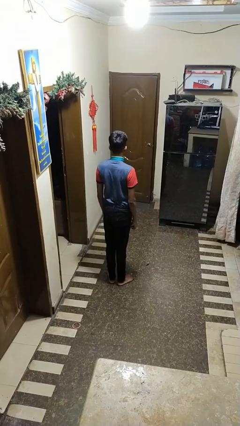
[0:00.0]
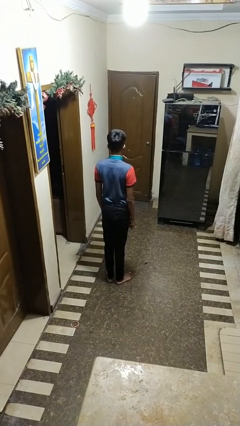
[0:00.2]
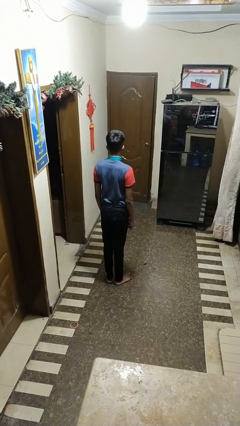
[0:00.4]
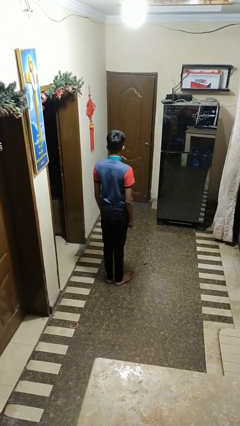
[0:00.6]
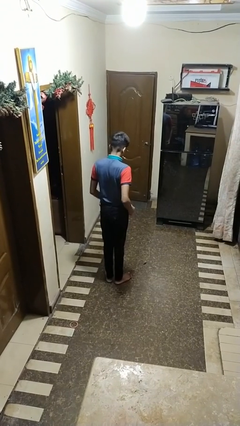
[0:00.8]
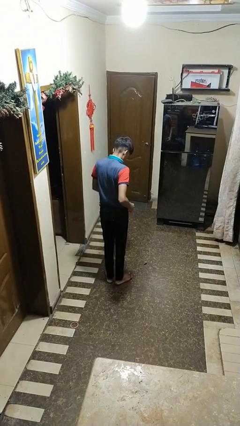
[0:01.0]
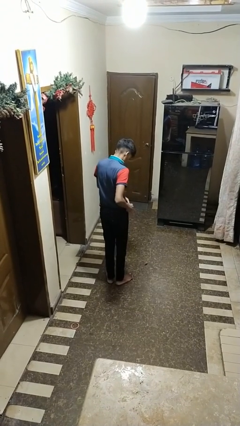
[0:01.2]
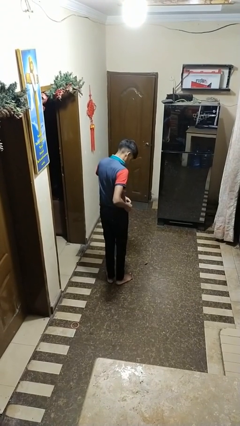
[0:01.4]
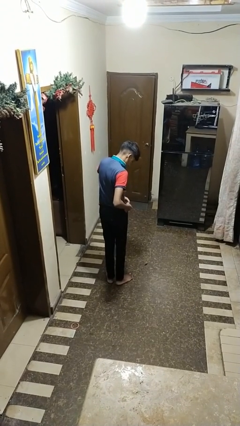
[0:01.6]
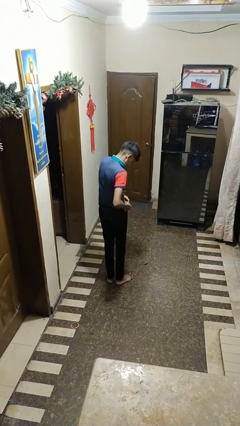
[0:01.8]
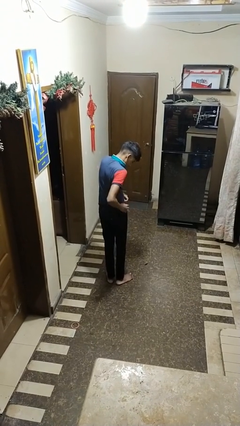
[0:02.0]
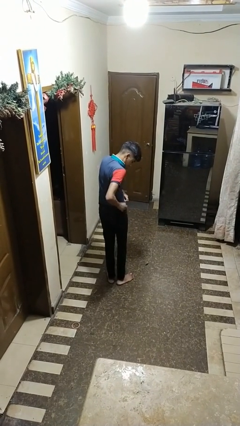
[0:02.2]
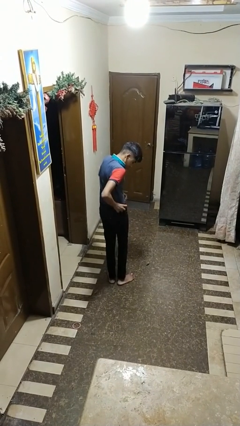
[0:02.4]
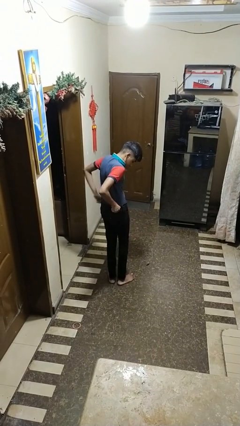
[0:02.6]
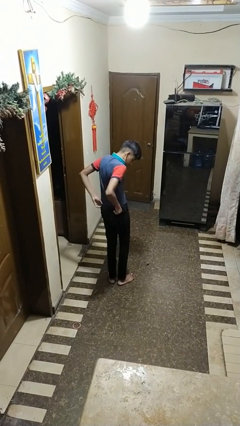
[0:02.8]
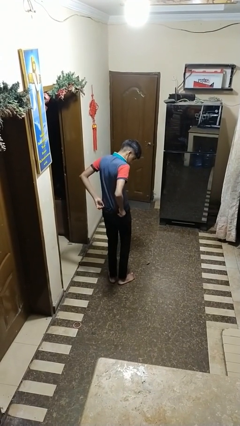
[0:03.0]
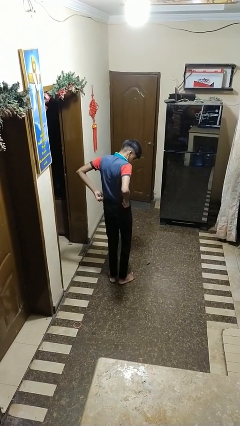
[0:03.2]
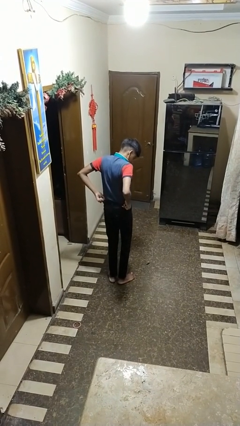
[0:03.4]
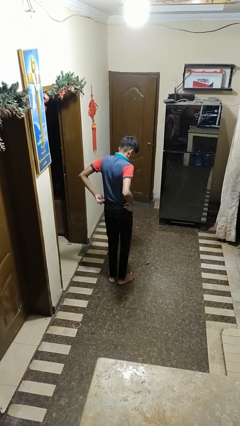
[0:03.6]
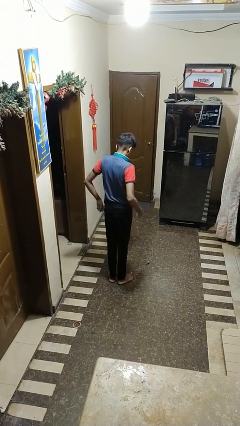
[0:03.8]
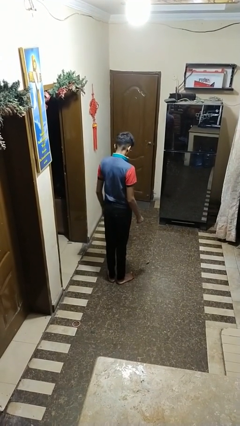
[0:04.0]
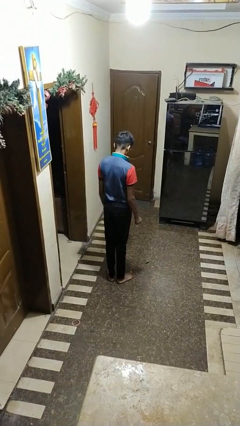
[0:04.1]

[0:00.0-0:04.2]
person hikes up pants

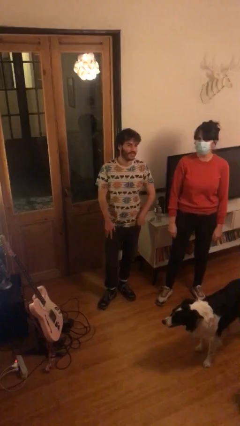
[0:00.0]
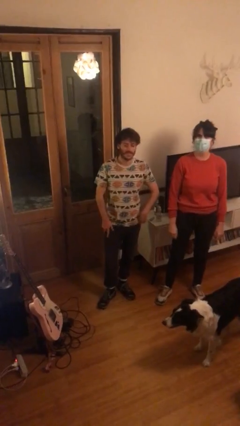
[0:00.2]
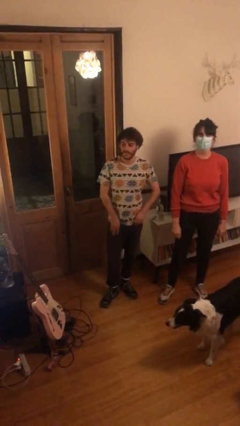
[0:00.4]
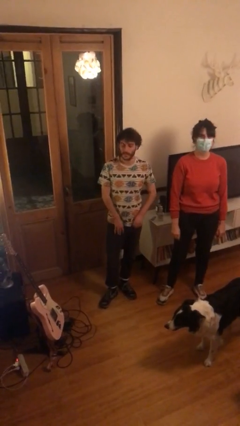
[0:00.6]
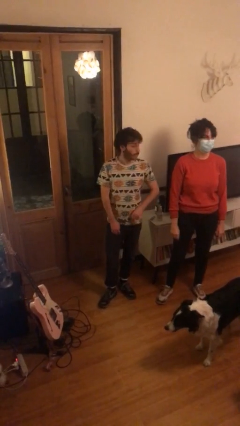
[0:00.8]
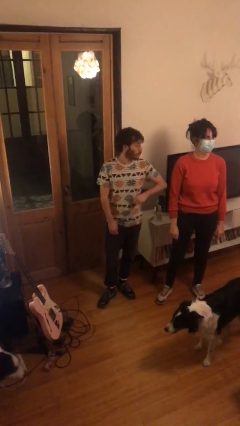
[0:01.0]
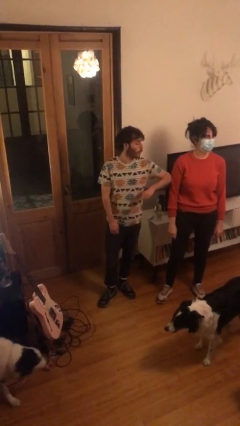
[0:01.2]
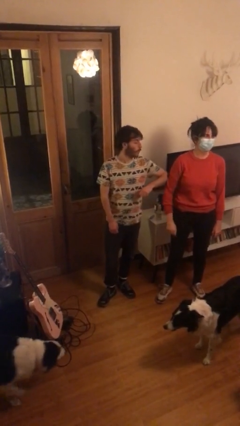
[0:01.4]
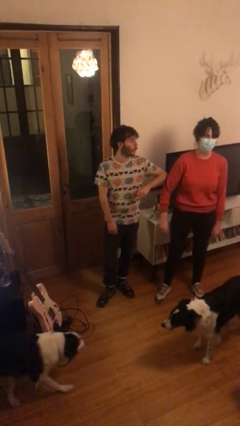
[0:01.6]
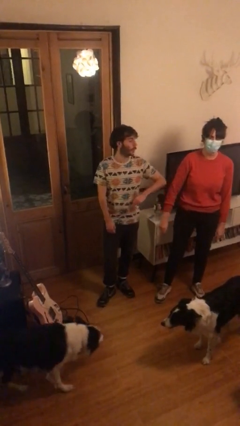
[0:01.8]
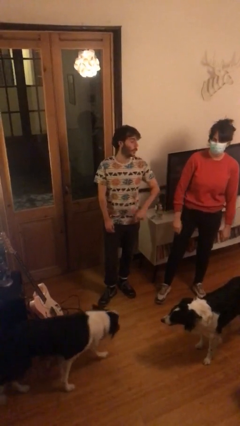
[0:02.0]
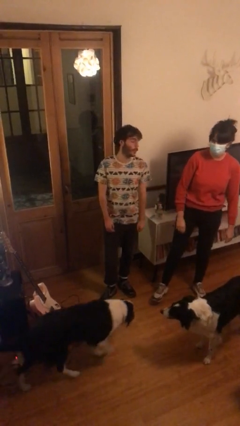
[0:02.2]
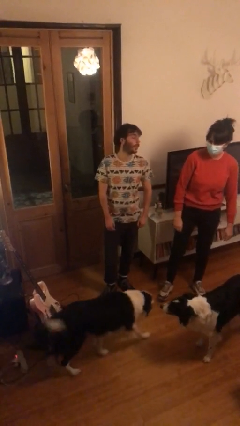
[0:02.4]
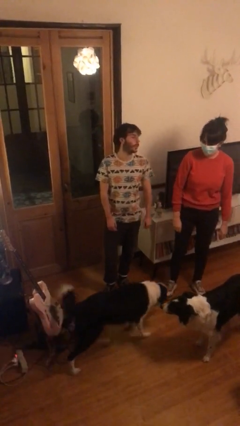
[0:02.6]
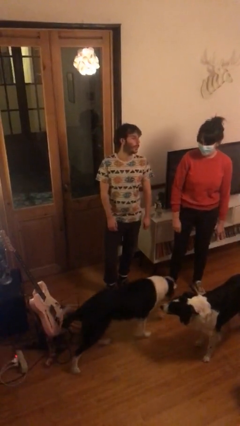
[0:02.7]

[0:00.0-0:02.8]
person nudges person with elbow

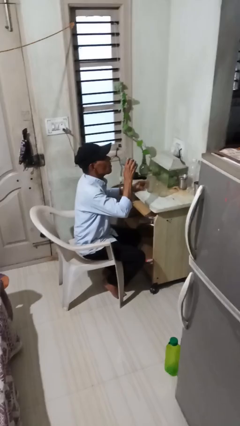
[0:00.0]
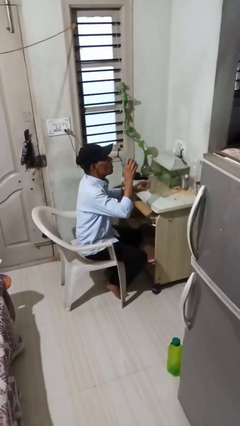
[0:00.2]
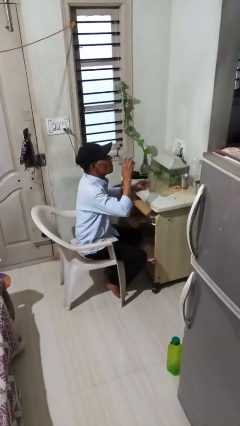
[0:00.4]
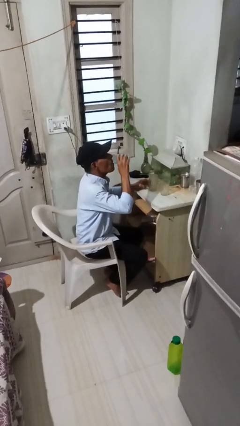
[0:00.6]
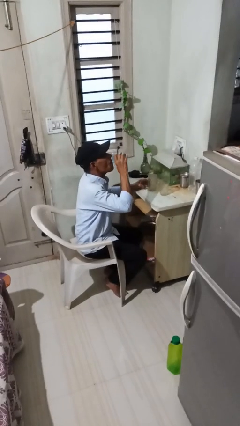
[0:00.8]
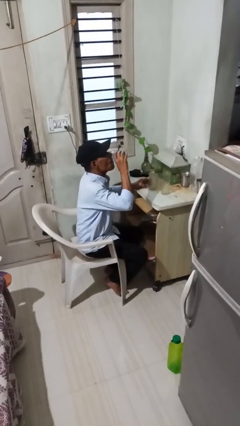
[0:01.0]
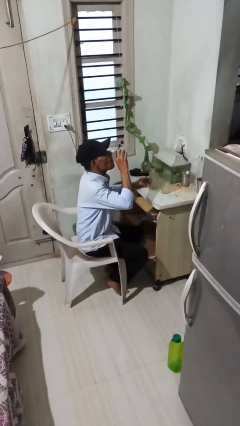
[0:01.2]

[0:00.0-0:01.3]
person drinks from shotglass

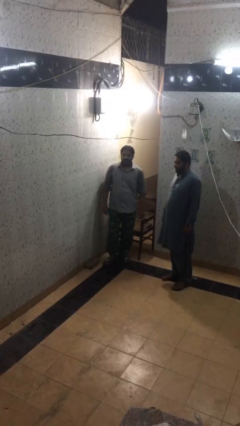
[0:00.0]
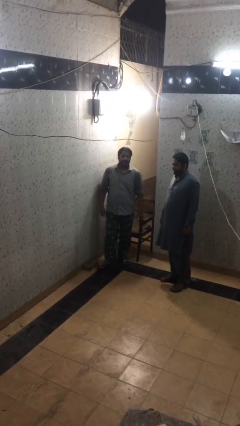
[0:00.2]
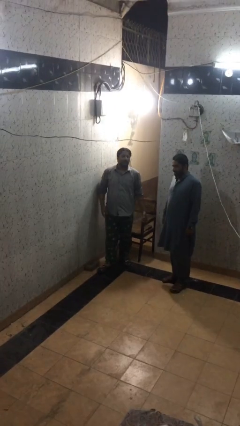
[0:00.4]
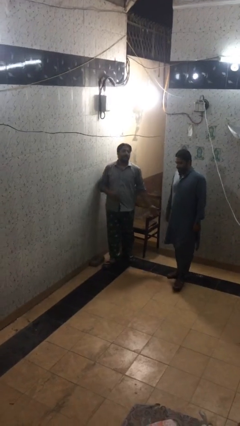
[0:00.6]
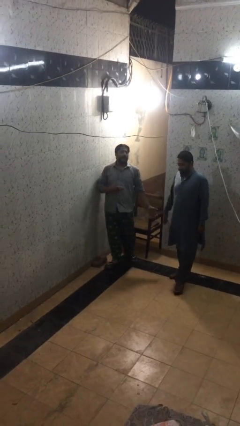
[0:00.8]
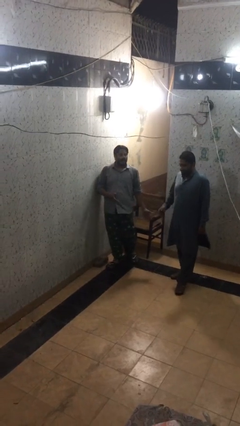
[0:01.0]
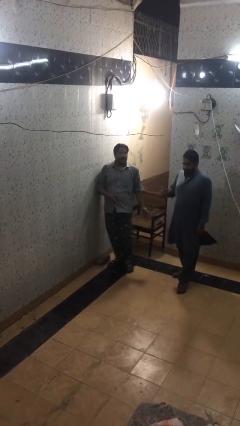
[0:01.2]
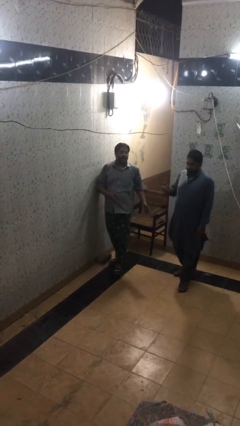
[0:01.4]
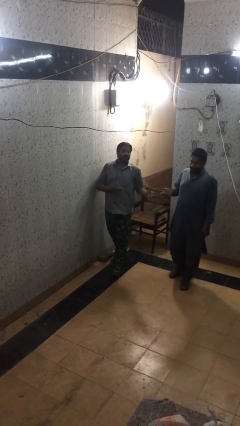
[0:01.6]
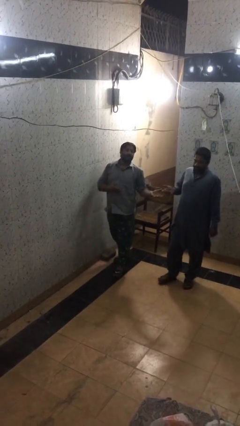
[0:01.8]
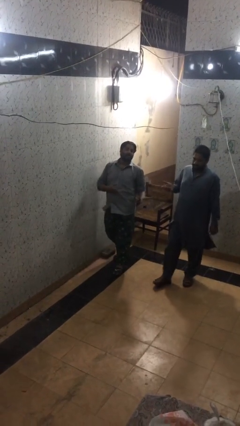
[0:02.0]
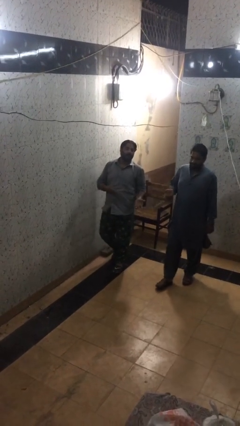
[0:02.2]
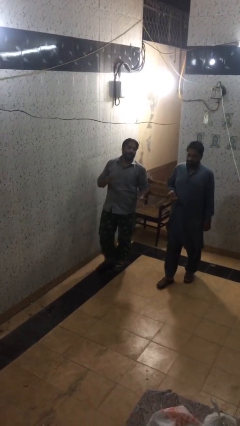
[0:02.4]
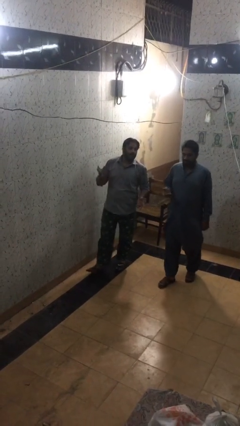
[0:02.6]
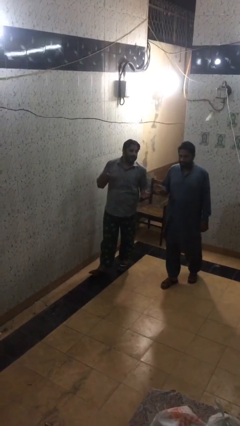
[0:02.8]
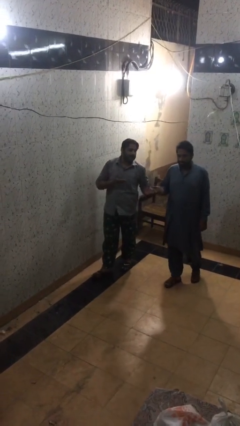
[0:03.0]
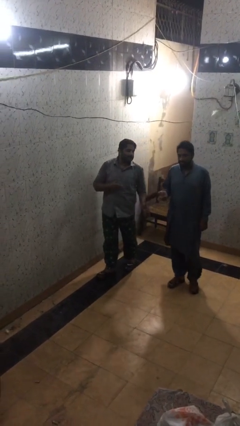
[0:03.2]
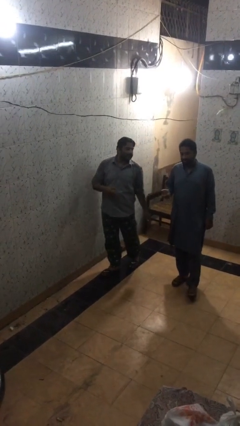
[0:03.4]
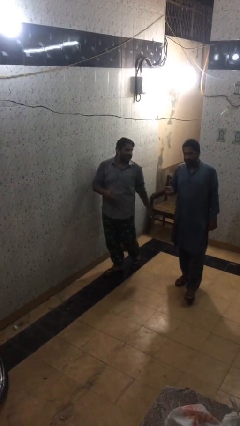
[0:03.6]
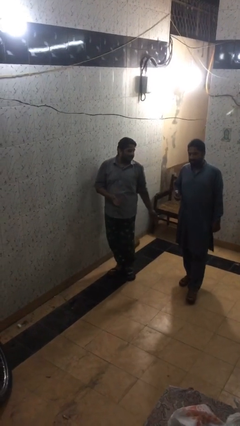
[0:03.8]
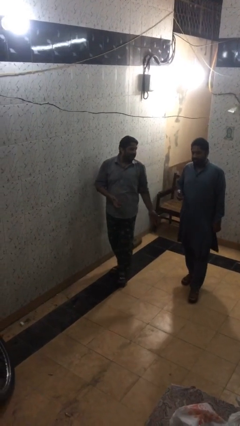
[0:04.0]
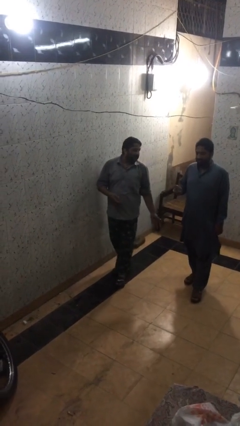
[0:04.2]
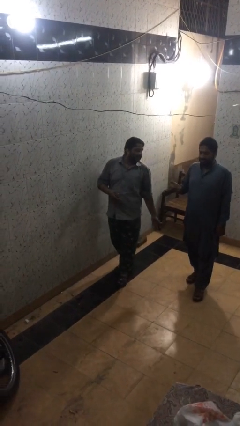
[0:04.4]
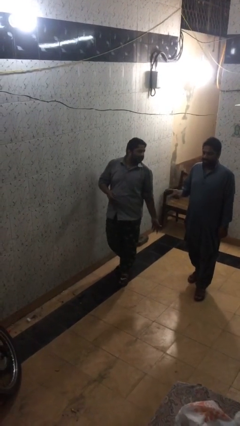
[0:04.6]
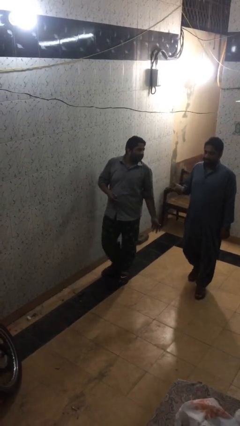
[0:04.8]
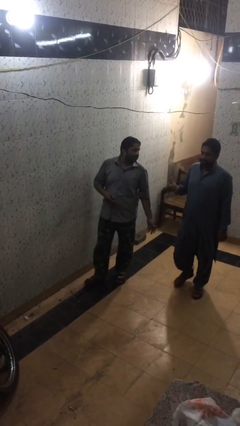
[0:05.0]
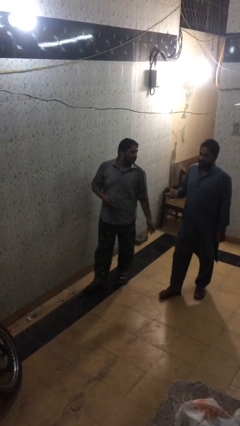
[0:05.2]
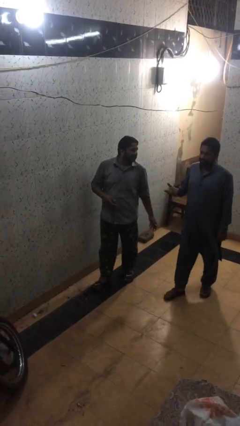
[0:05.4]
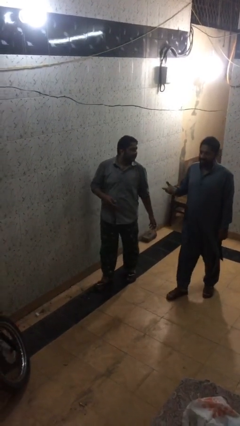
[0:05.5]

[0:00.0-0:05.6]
person talks to person

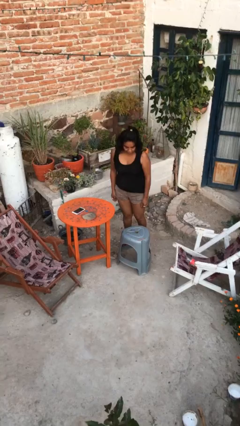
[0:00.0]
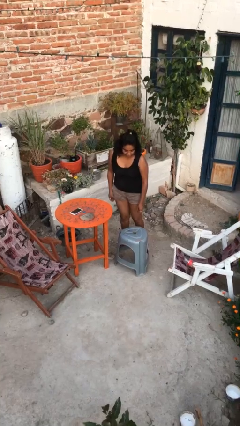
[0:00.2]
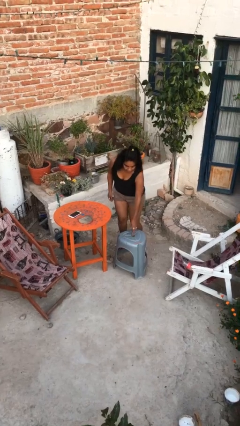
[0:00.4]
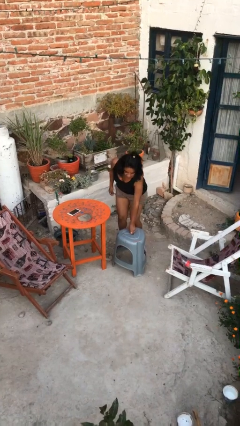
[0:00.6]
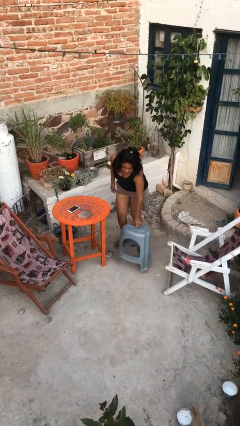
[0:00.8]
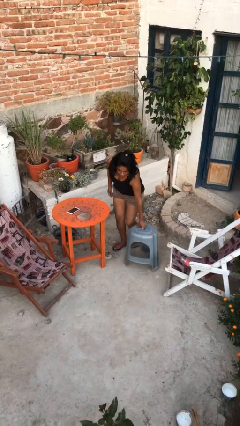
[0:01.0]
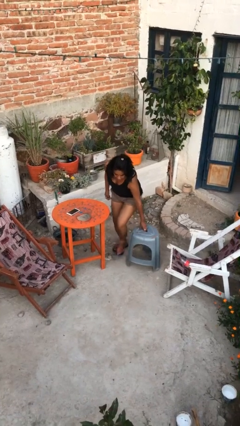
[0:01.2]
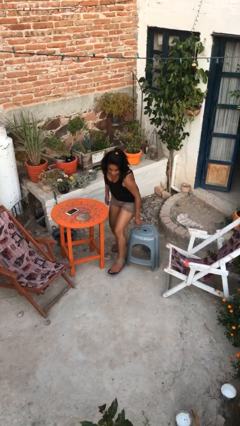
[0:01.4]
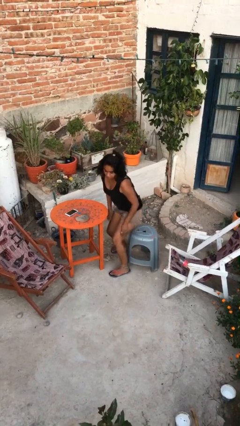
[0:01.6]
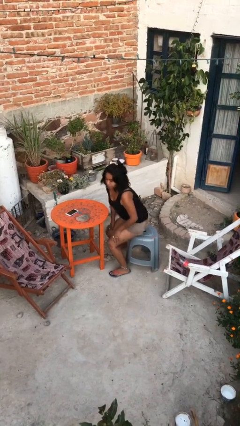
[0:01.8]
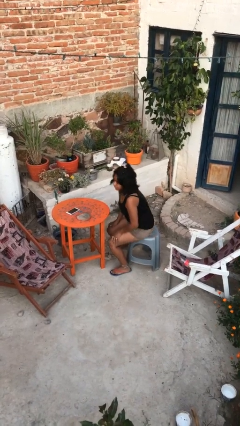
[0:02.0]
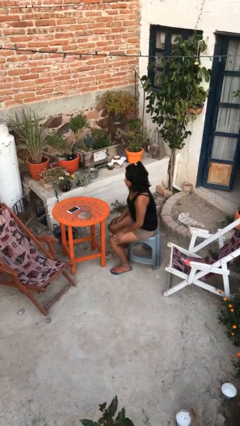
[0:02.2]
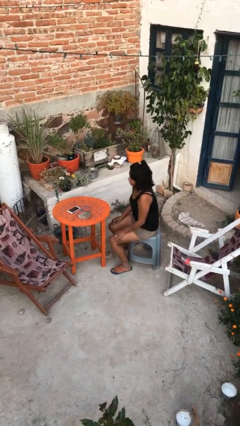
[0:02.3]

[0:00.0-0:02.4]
person sits down

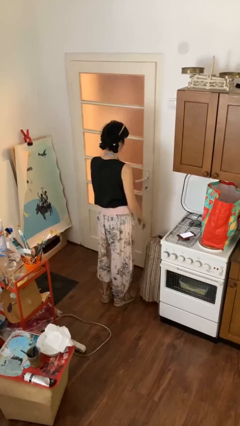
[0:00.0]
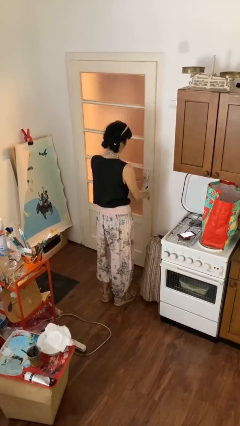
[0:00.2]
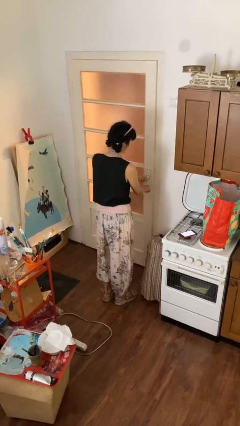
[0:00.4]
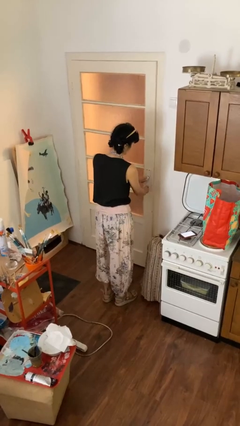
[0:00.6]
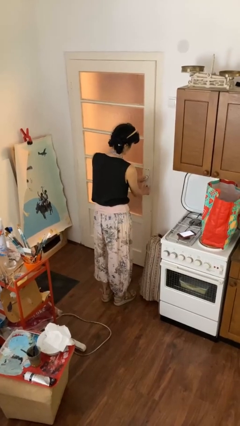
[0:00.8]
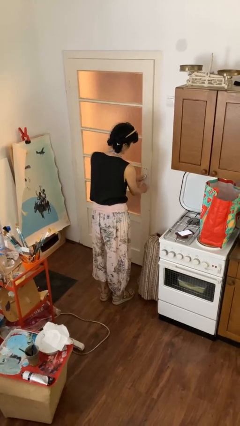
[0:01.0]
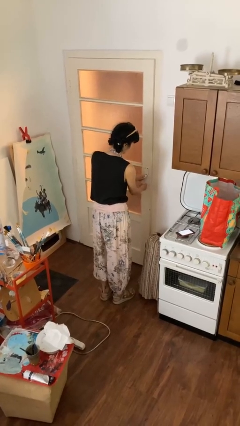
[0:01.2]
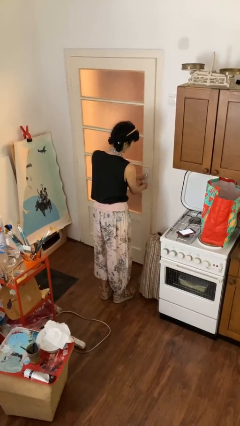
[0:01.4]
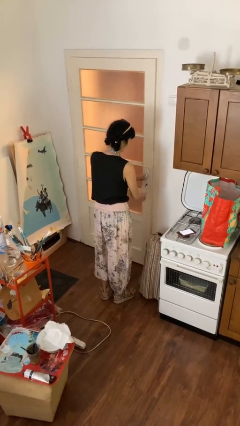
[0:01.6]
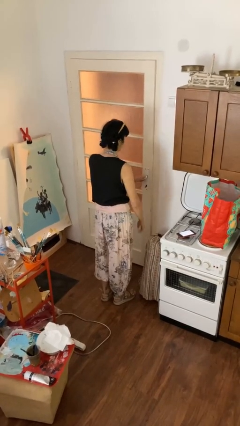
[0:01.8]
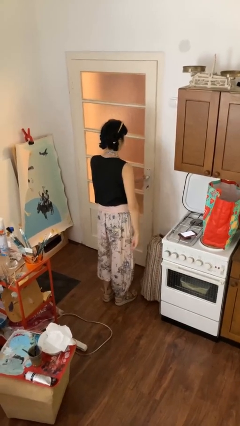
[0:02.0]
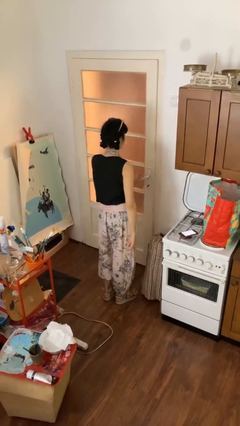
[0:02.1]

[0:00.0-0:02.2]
person locks door with keys
